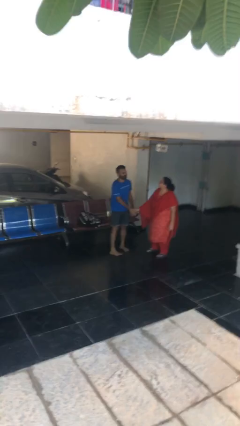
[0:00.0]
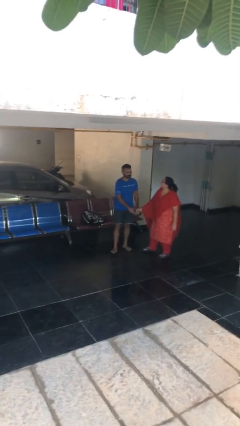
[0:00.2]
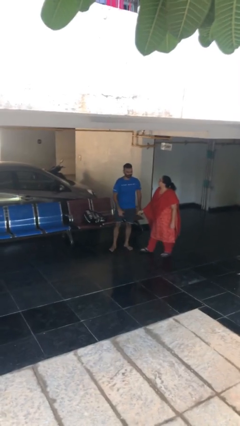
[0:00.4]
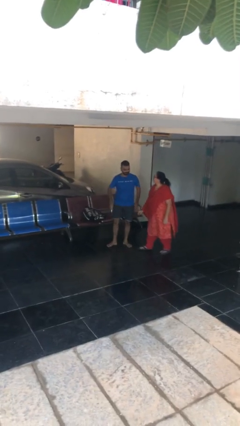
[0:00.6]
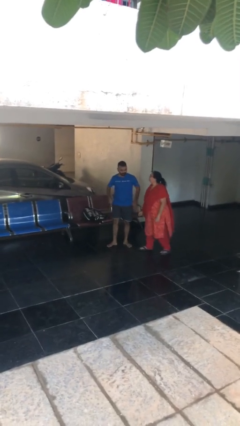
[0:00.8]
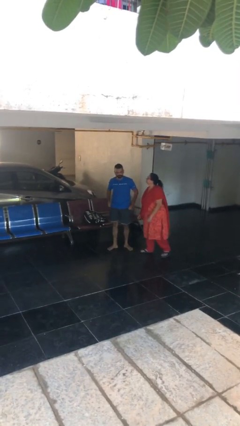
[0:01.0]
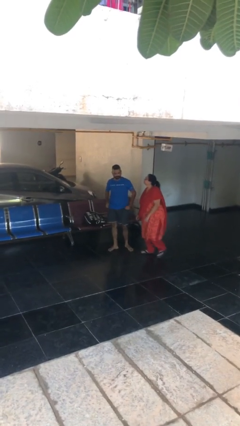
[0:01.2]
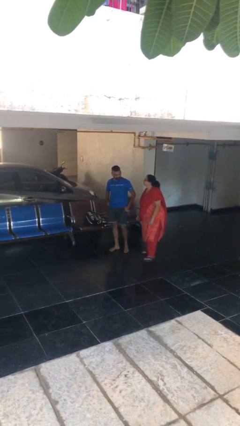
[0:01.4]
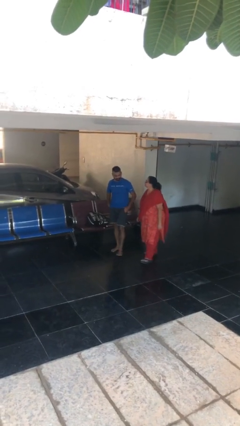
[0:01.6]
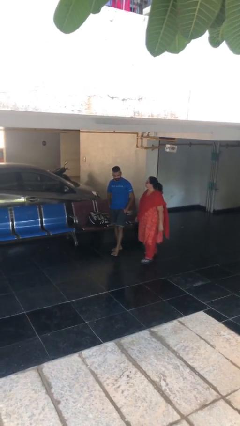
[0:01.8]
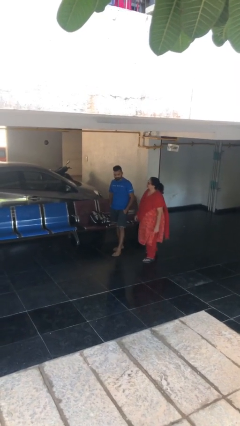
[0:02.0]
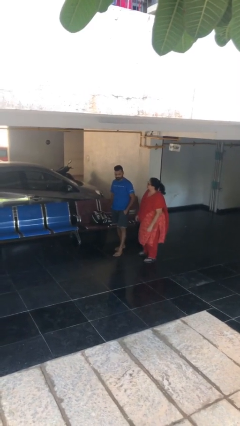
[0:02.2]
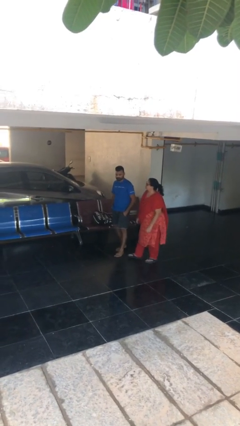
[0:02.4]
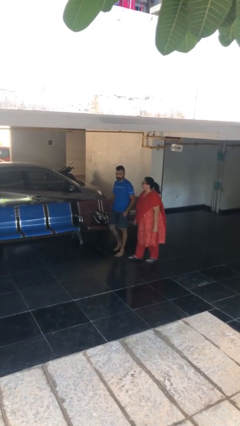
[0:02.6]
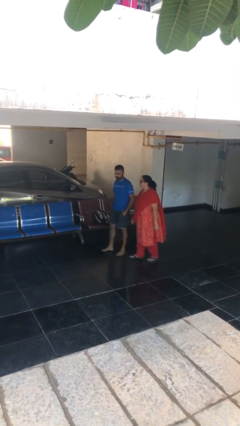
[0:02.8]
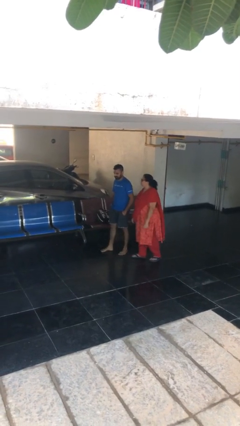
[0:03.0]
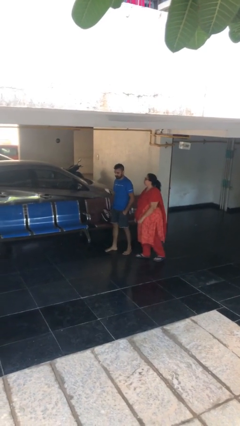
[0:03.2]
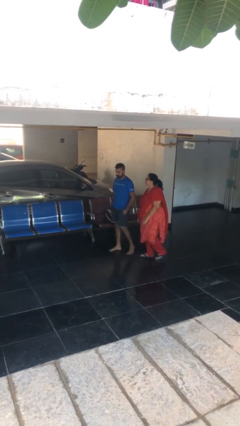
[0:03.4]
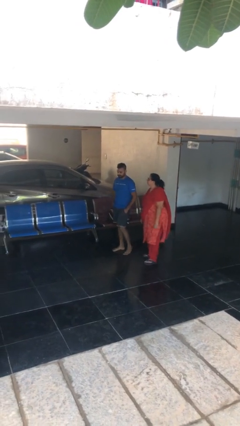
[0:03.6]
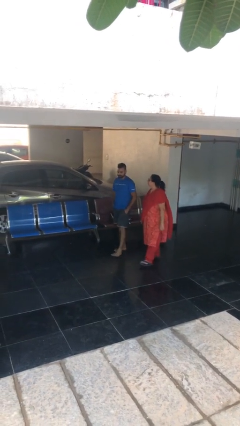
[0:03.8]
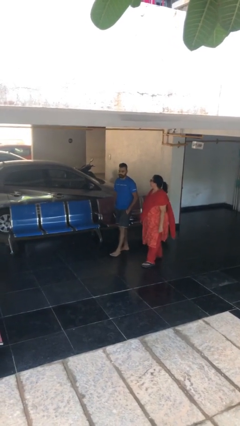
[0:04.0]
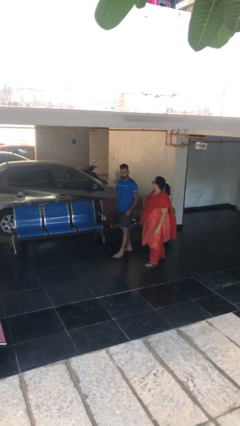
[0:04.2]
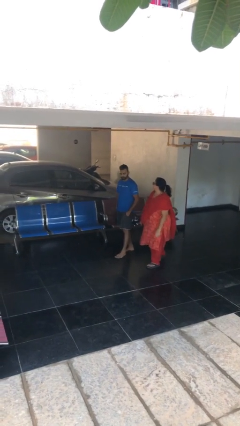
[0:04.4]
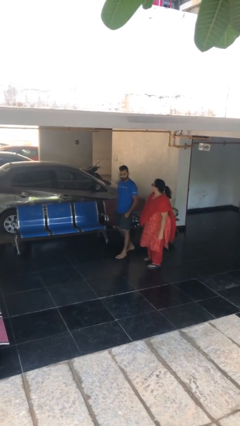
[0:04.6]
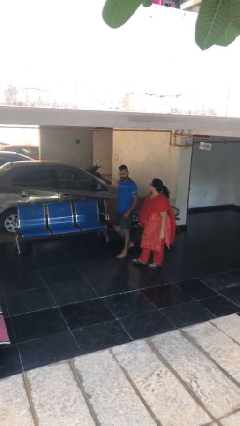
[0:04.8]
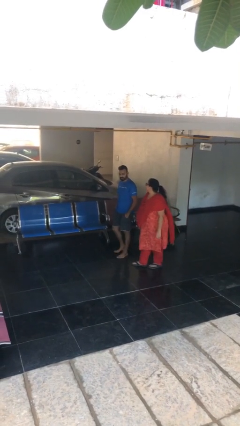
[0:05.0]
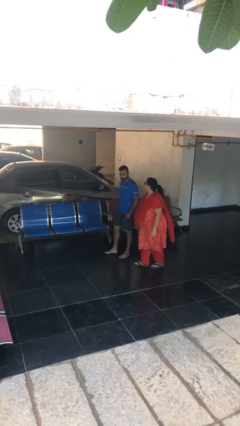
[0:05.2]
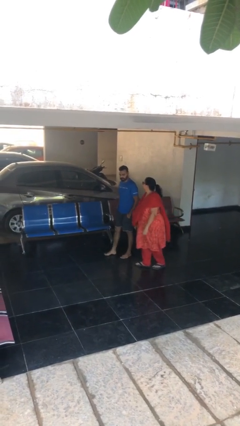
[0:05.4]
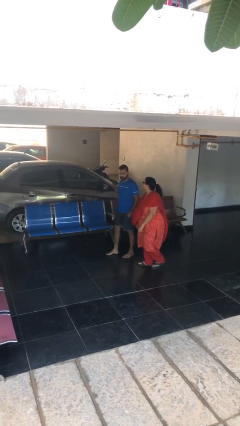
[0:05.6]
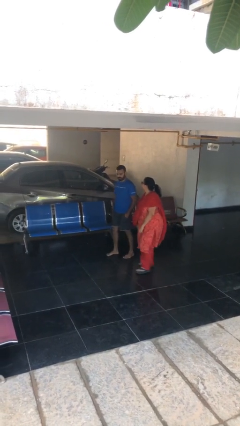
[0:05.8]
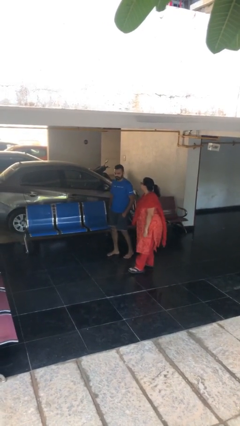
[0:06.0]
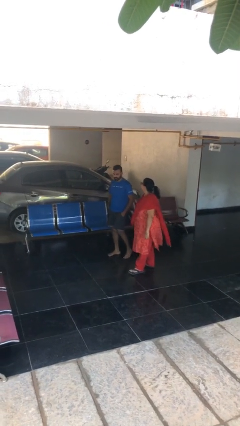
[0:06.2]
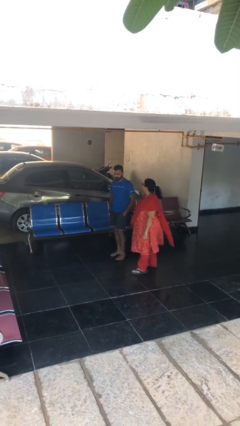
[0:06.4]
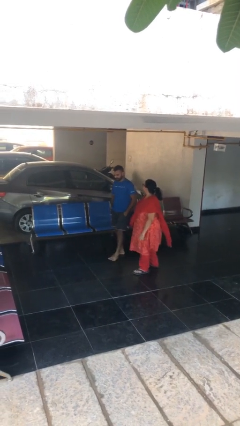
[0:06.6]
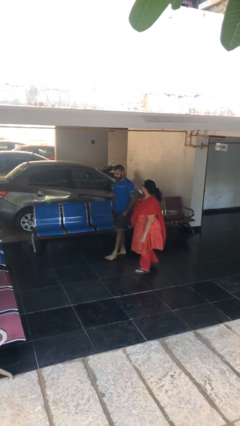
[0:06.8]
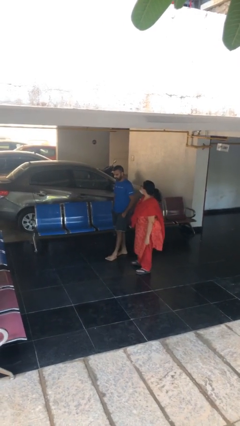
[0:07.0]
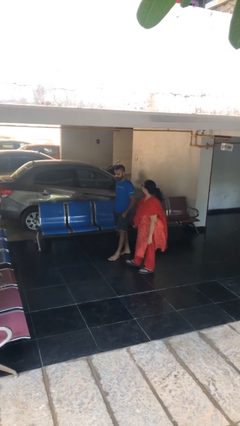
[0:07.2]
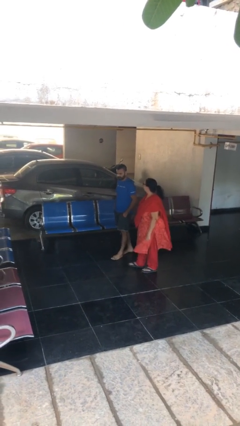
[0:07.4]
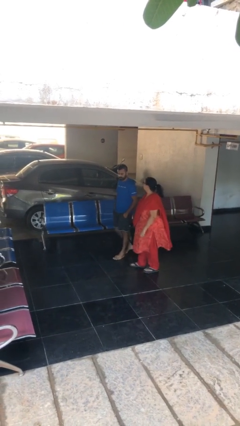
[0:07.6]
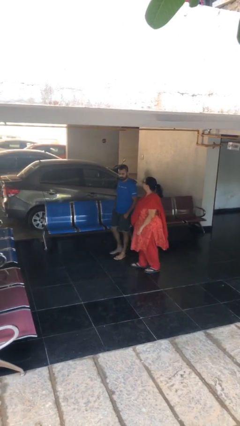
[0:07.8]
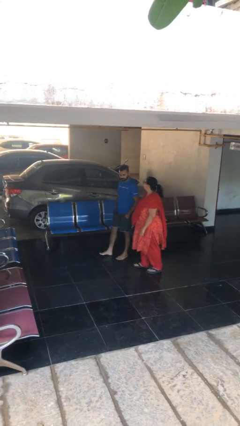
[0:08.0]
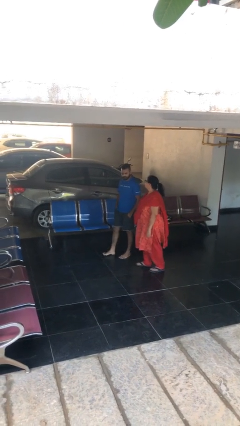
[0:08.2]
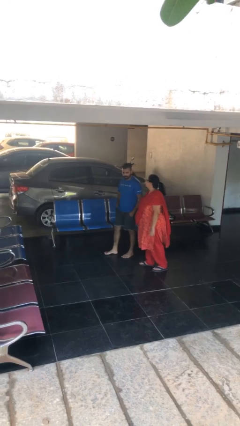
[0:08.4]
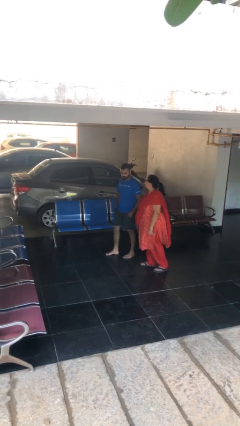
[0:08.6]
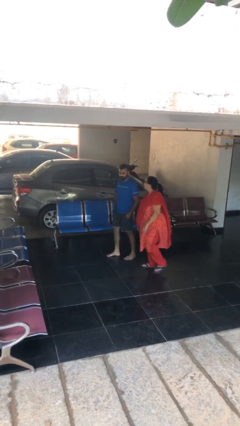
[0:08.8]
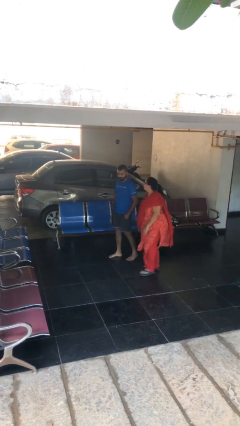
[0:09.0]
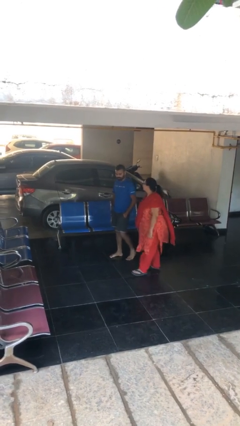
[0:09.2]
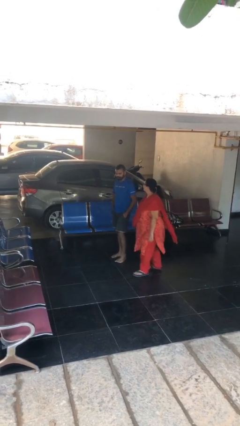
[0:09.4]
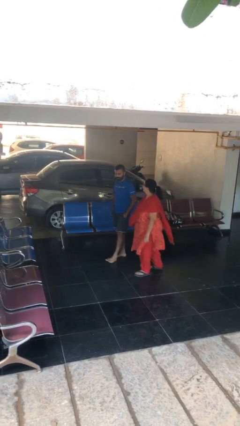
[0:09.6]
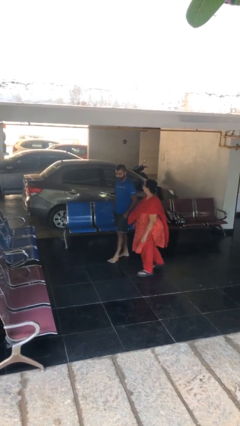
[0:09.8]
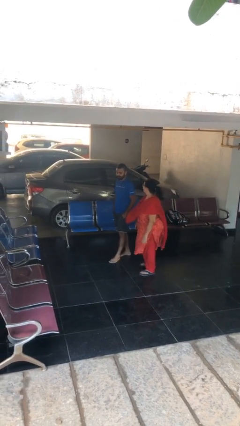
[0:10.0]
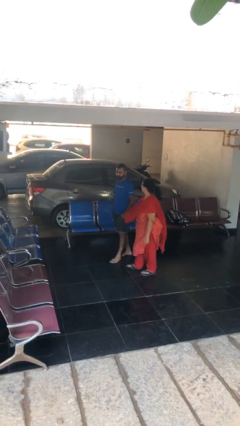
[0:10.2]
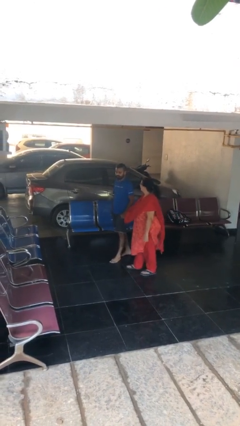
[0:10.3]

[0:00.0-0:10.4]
person talks to person

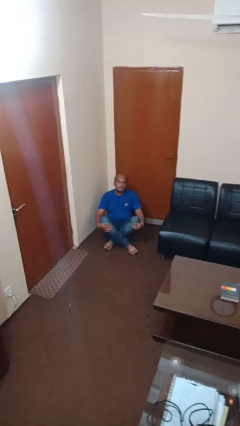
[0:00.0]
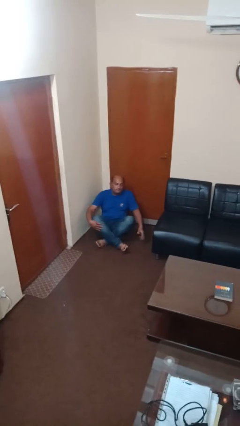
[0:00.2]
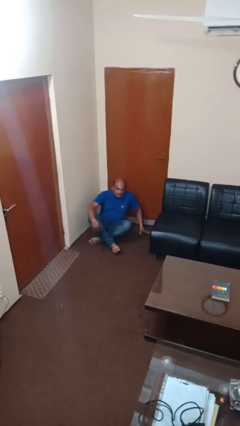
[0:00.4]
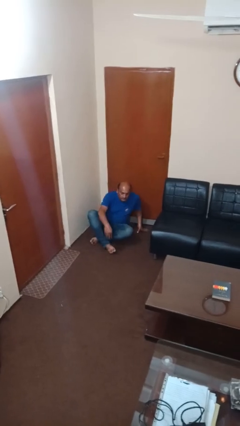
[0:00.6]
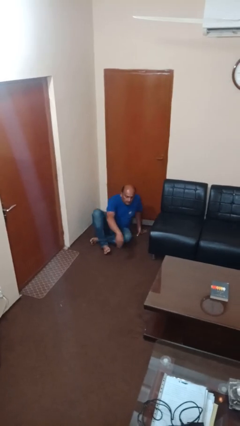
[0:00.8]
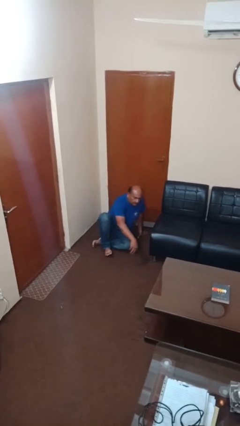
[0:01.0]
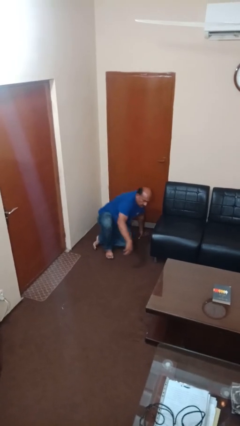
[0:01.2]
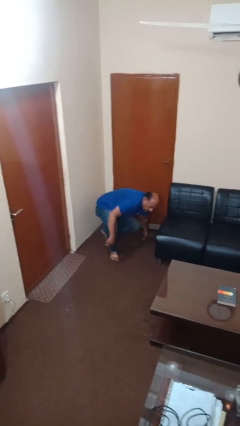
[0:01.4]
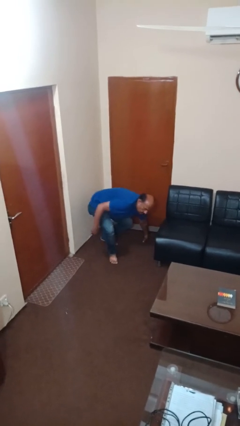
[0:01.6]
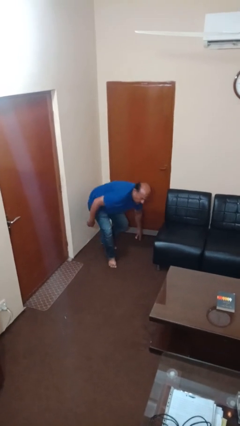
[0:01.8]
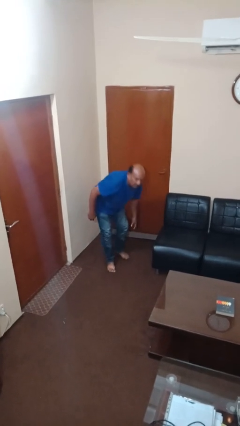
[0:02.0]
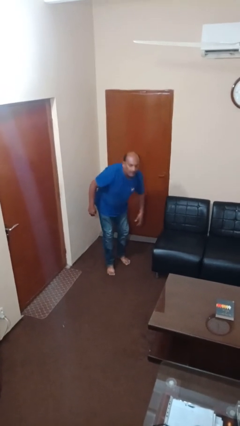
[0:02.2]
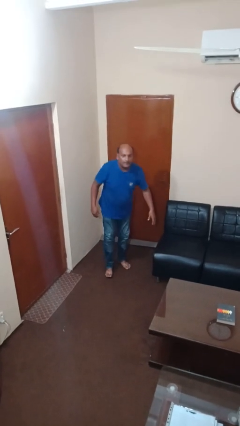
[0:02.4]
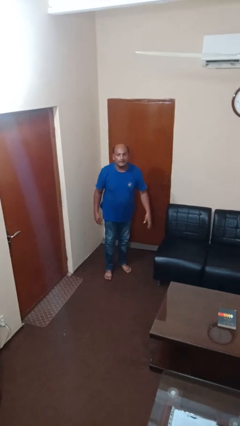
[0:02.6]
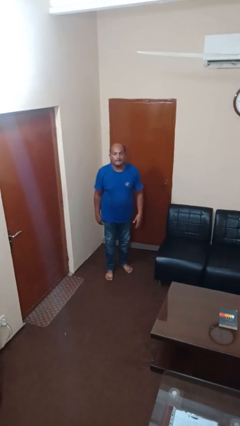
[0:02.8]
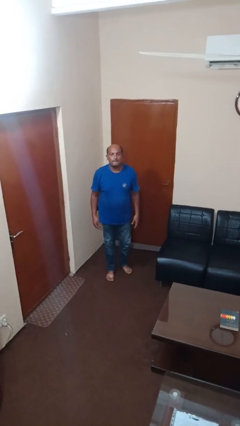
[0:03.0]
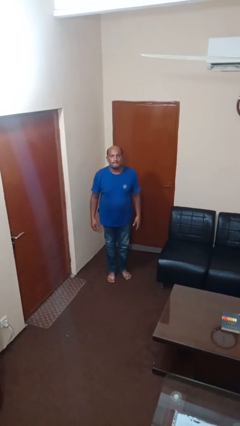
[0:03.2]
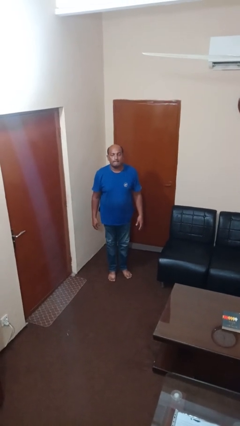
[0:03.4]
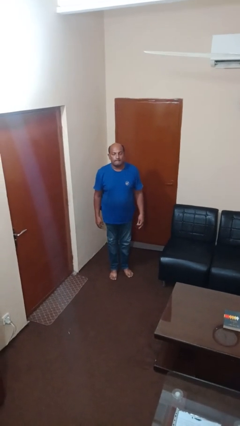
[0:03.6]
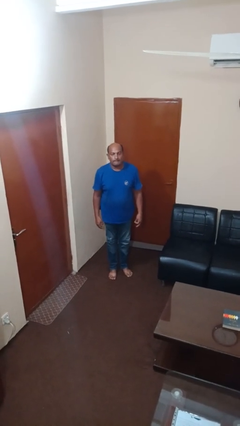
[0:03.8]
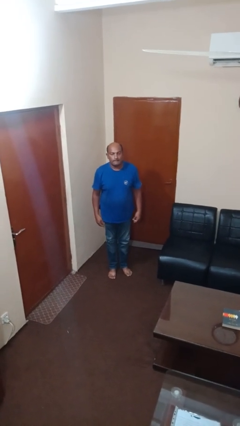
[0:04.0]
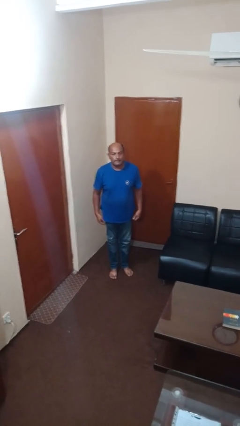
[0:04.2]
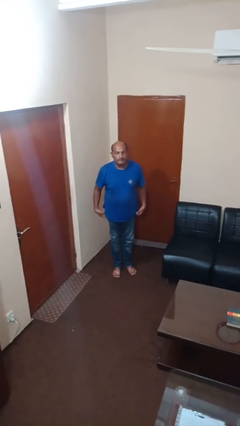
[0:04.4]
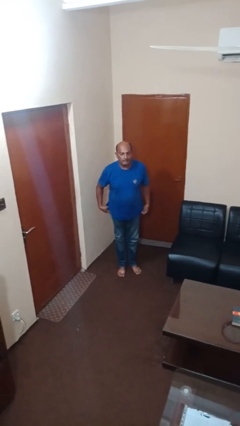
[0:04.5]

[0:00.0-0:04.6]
person stands up from floor

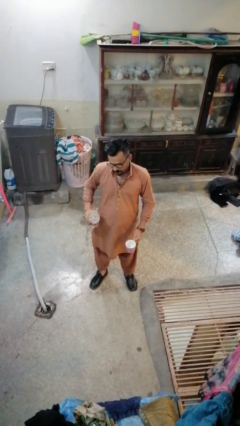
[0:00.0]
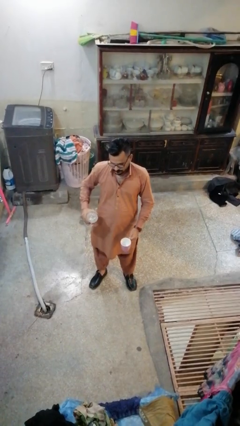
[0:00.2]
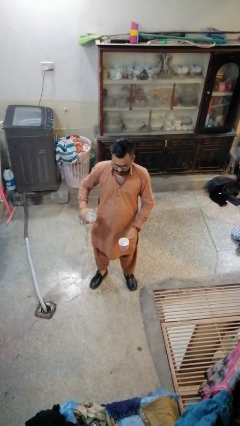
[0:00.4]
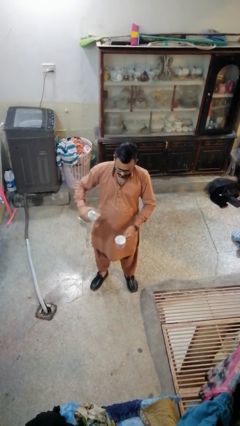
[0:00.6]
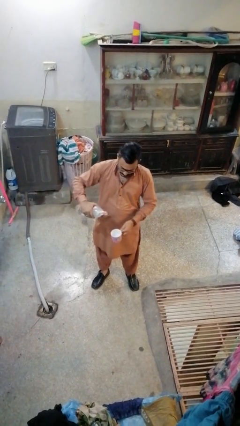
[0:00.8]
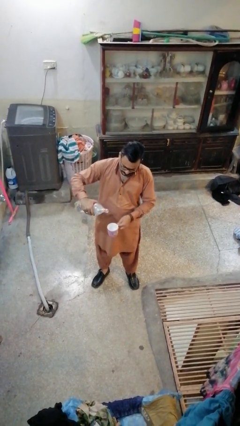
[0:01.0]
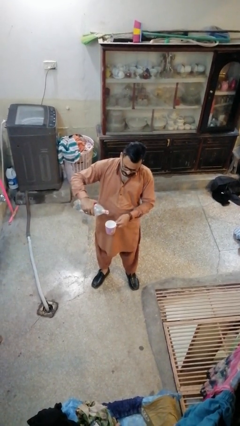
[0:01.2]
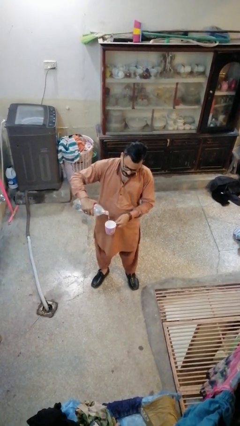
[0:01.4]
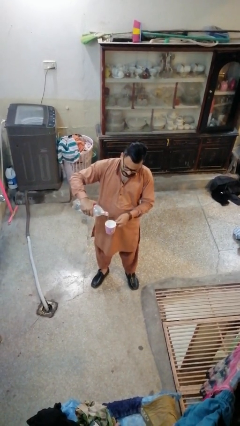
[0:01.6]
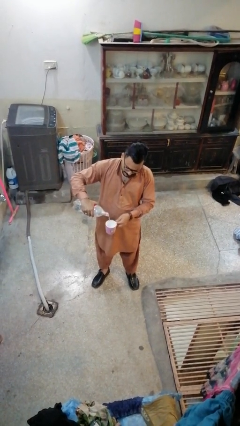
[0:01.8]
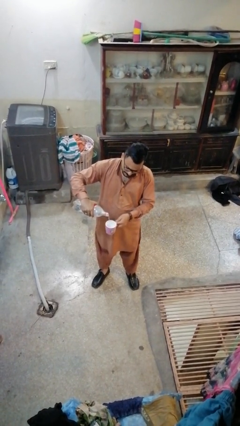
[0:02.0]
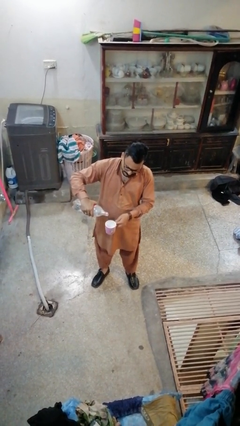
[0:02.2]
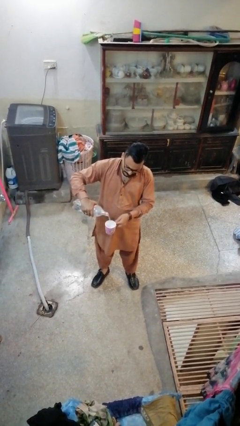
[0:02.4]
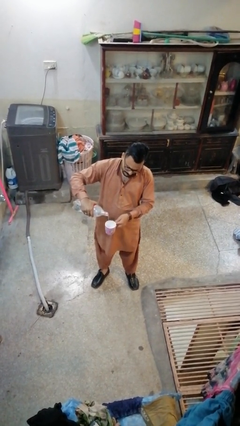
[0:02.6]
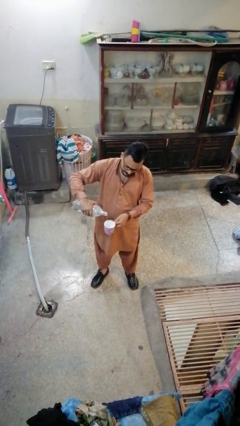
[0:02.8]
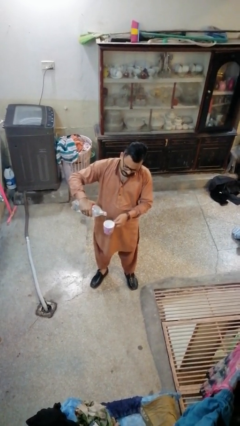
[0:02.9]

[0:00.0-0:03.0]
person pours liquid into cup
